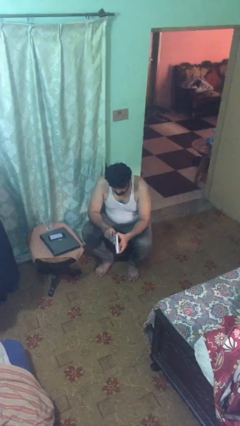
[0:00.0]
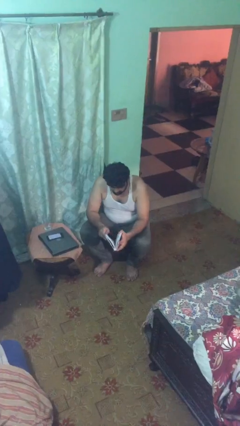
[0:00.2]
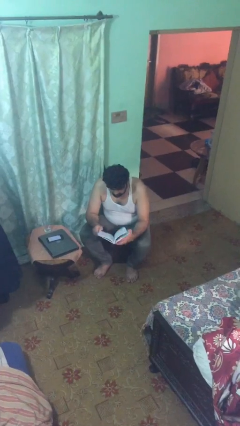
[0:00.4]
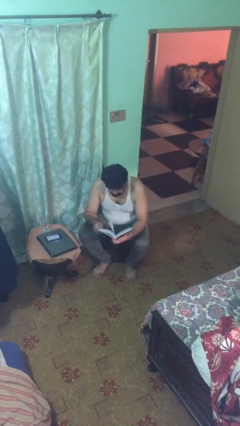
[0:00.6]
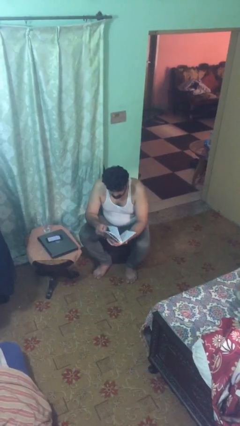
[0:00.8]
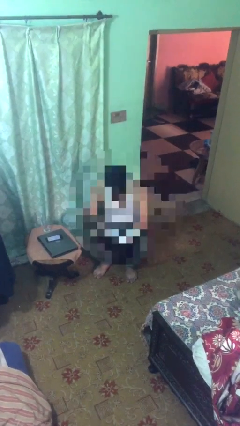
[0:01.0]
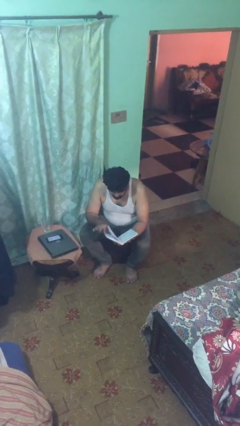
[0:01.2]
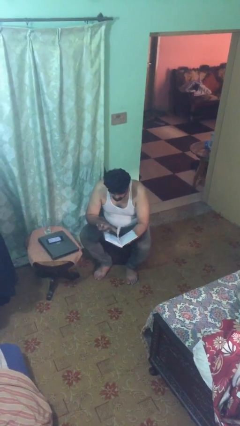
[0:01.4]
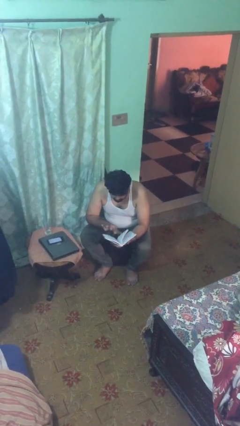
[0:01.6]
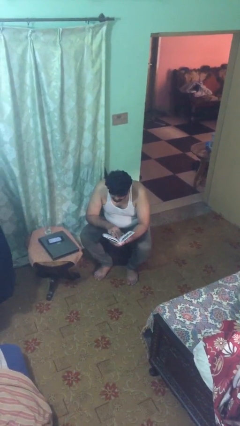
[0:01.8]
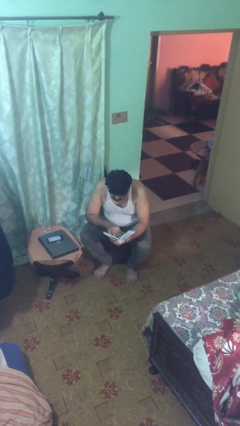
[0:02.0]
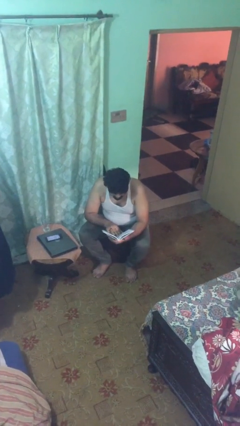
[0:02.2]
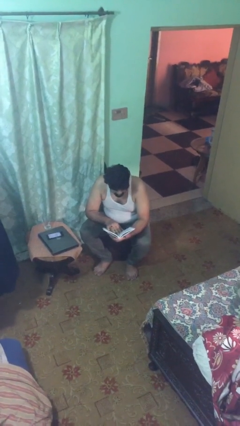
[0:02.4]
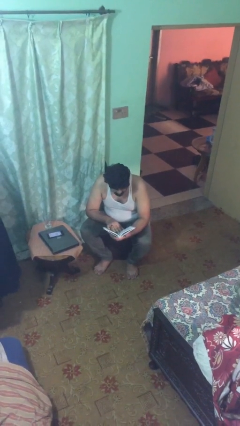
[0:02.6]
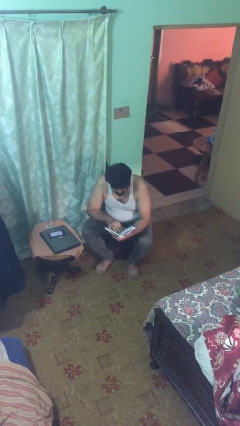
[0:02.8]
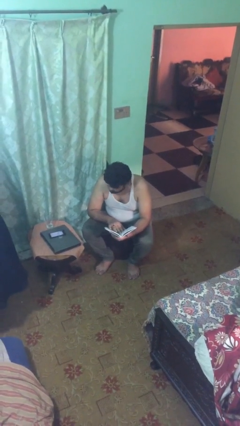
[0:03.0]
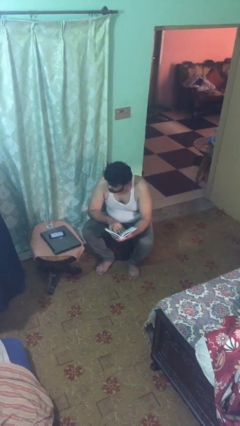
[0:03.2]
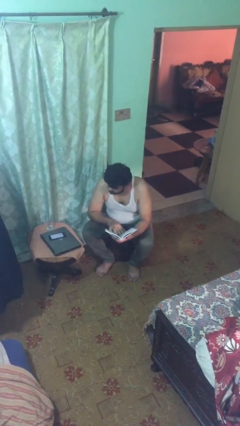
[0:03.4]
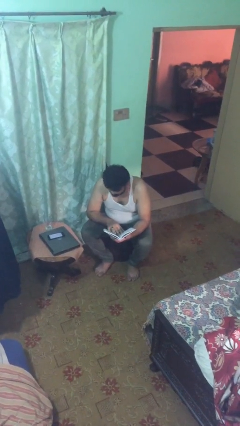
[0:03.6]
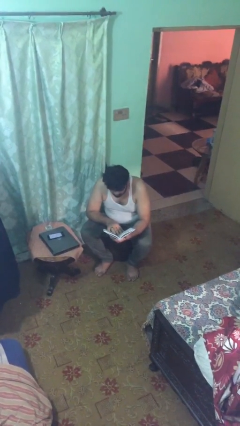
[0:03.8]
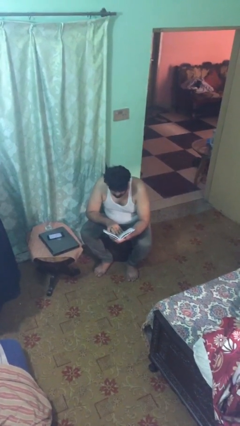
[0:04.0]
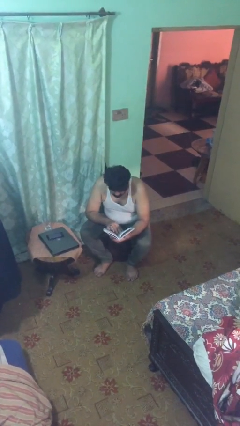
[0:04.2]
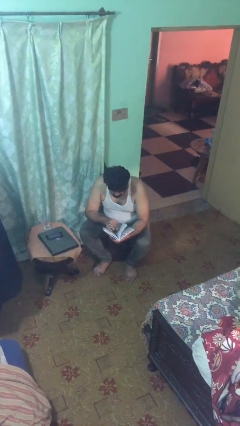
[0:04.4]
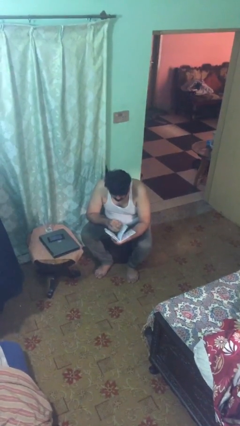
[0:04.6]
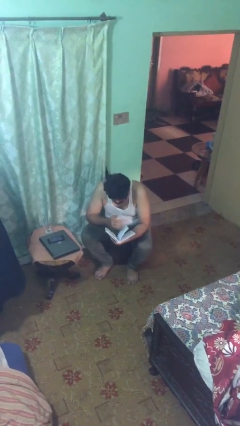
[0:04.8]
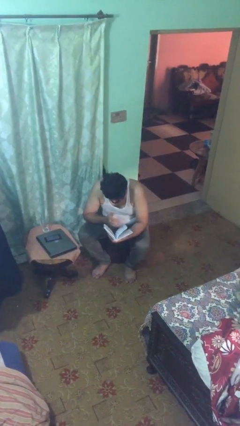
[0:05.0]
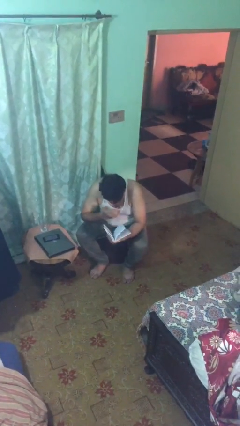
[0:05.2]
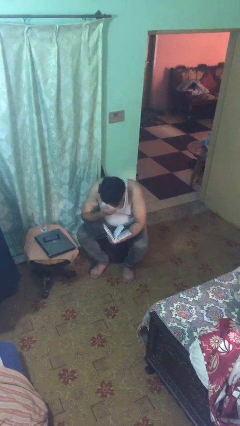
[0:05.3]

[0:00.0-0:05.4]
person reads document

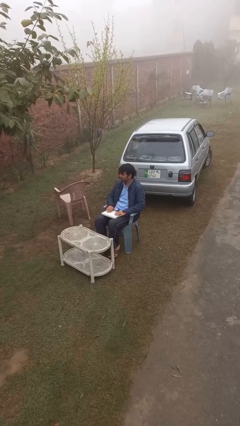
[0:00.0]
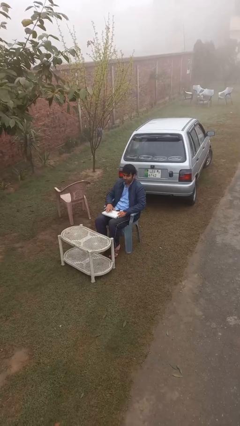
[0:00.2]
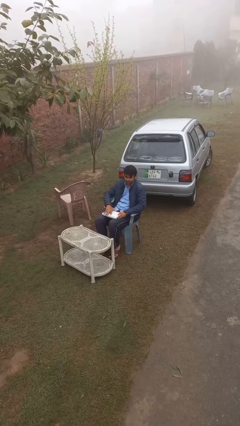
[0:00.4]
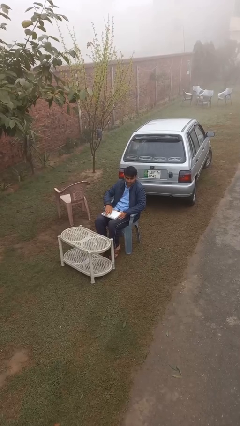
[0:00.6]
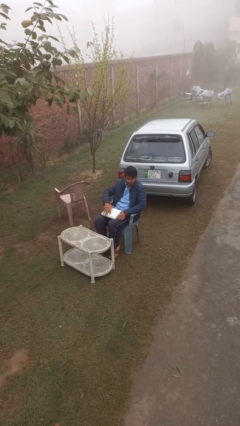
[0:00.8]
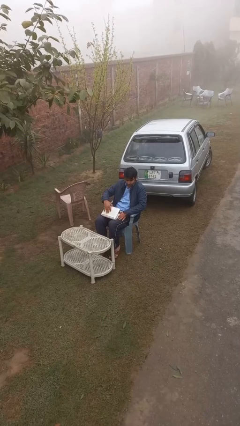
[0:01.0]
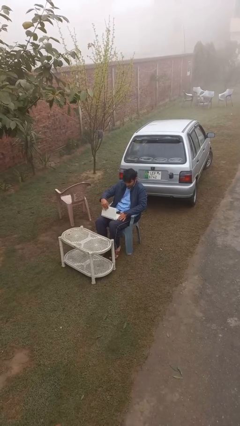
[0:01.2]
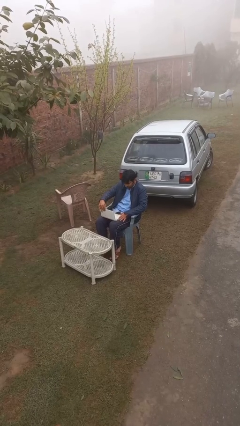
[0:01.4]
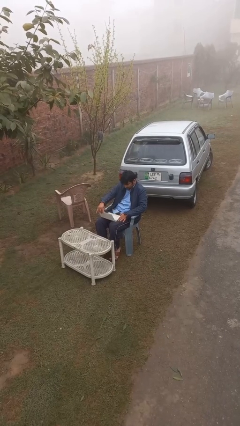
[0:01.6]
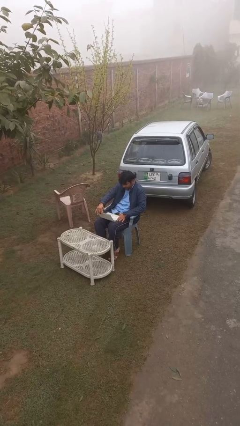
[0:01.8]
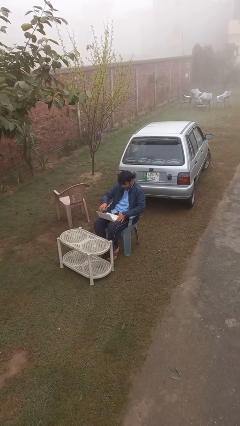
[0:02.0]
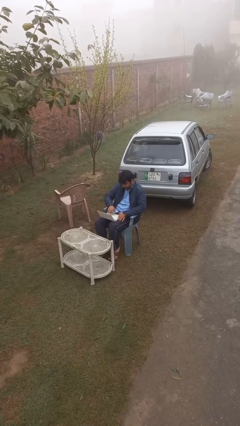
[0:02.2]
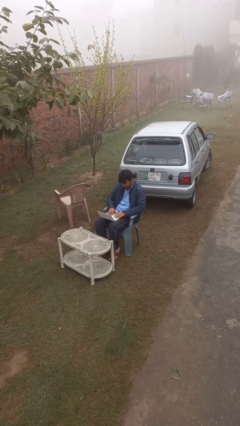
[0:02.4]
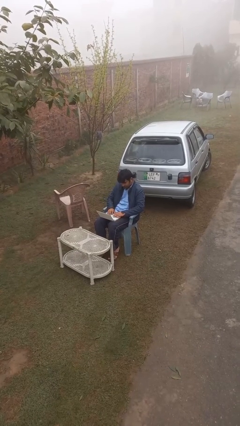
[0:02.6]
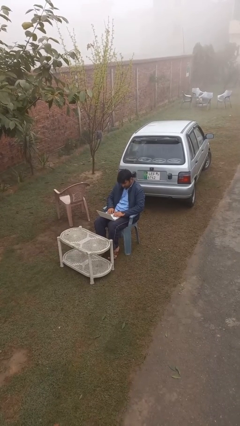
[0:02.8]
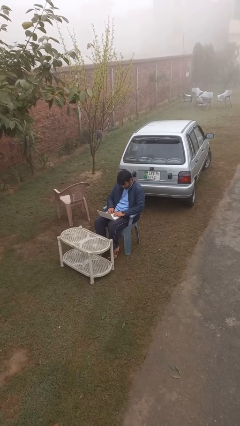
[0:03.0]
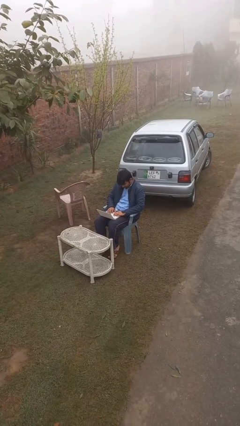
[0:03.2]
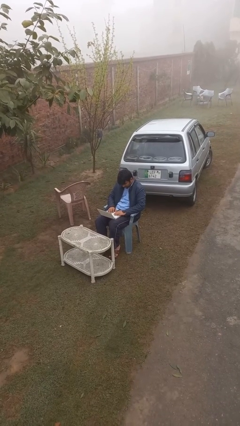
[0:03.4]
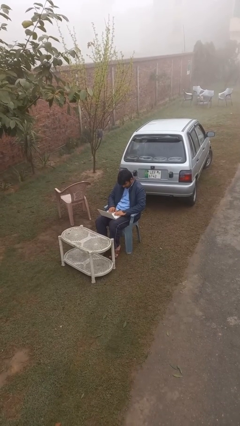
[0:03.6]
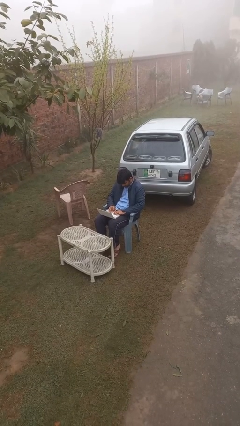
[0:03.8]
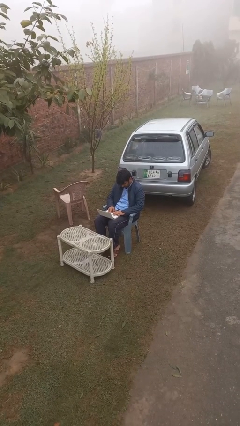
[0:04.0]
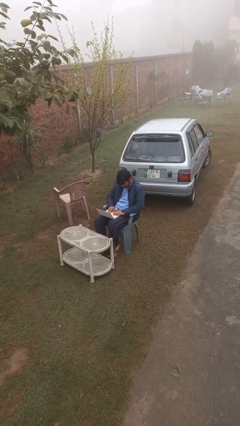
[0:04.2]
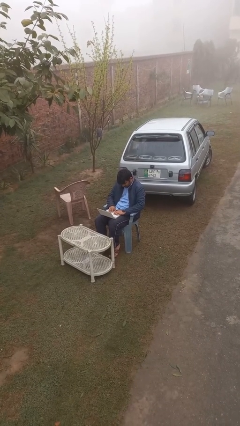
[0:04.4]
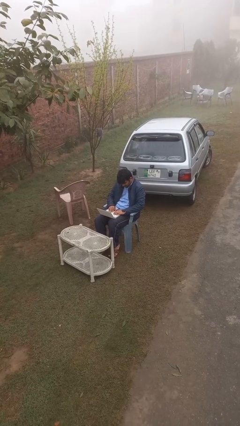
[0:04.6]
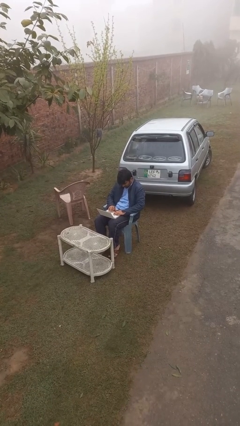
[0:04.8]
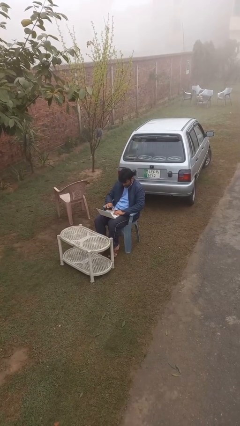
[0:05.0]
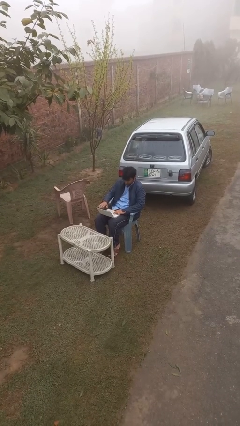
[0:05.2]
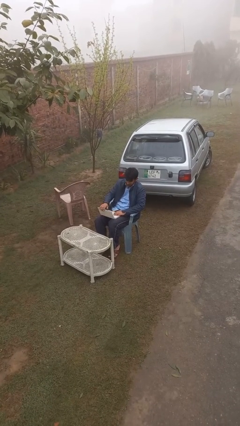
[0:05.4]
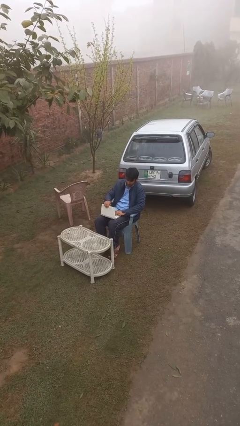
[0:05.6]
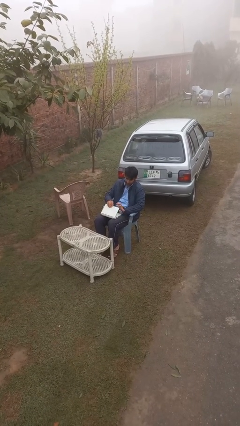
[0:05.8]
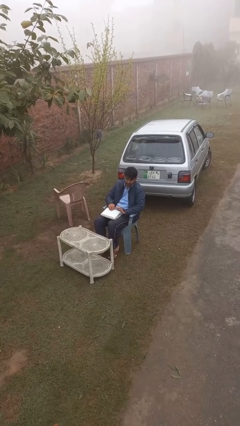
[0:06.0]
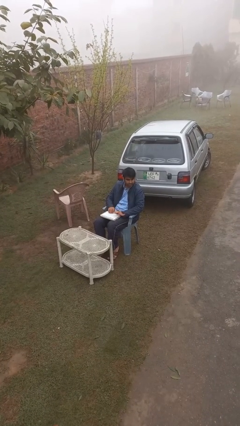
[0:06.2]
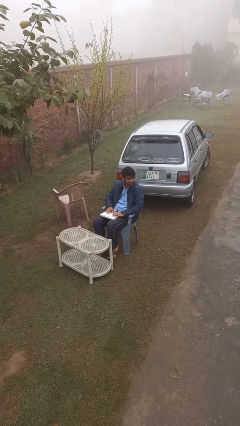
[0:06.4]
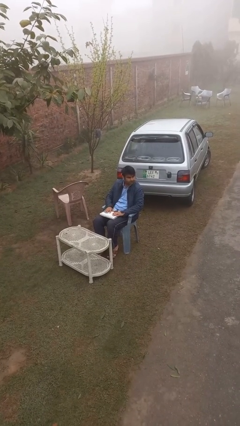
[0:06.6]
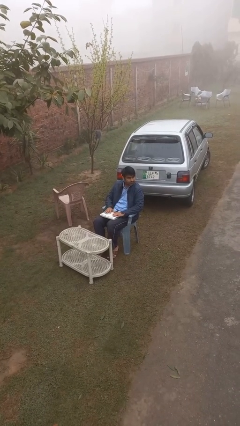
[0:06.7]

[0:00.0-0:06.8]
person interacts with laptop

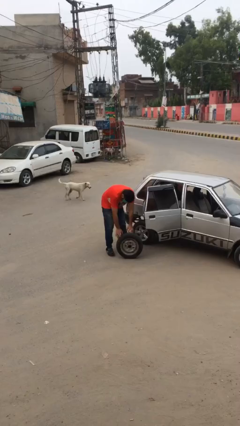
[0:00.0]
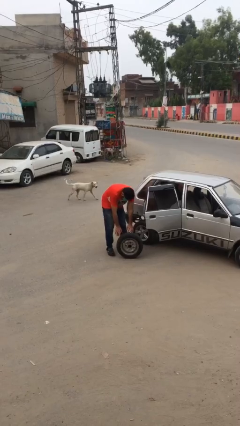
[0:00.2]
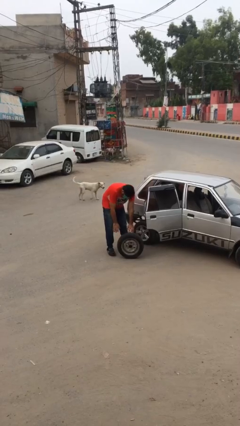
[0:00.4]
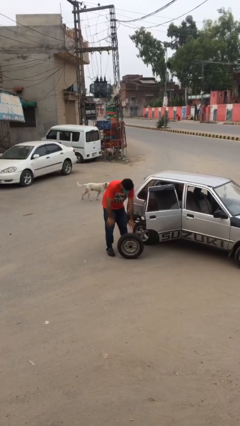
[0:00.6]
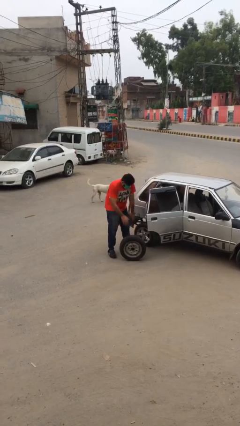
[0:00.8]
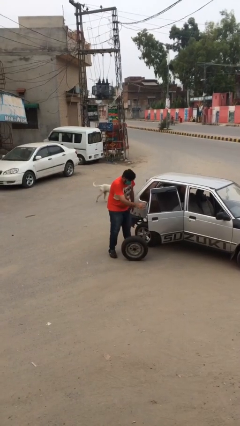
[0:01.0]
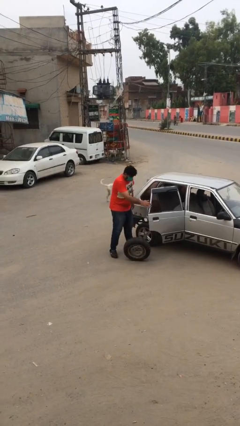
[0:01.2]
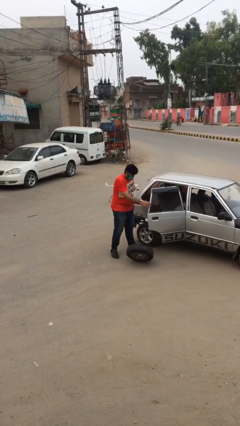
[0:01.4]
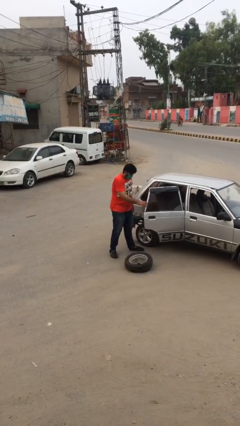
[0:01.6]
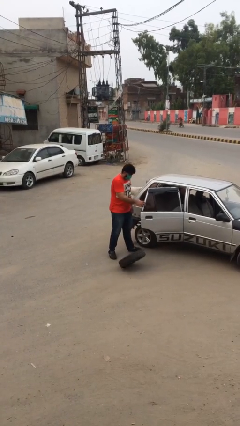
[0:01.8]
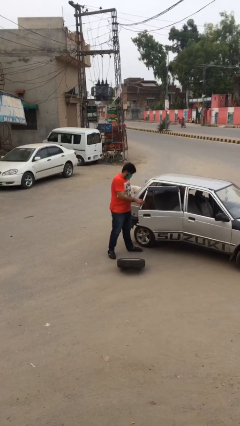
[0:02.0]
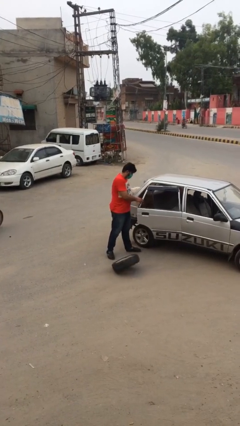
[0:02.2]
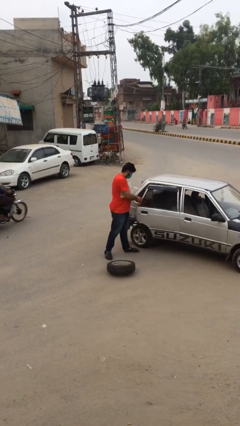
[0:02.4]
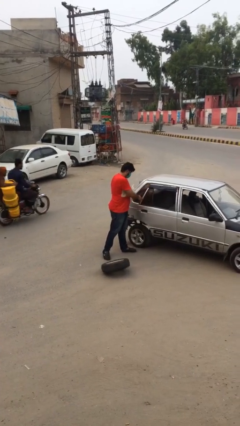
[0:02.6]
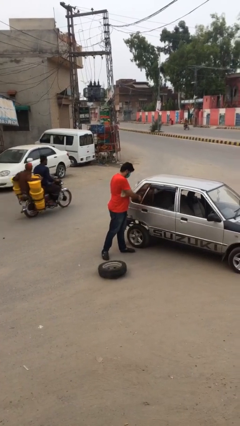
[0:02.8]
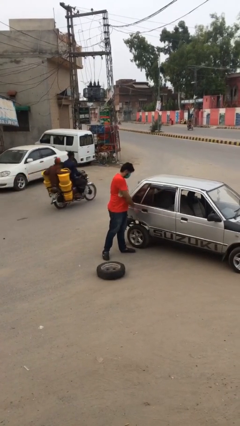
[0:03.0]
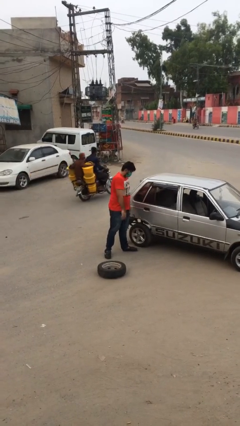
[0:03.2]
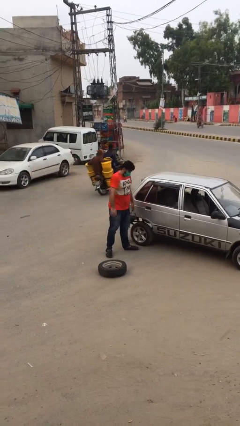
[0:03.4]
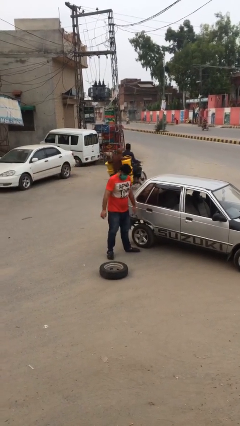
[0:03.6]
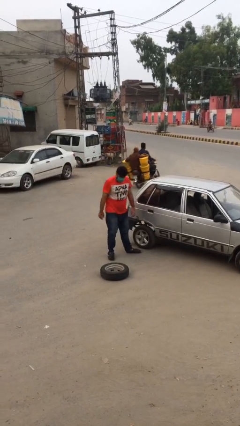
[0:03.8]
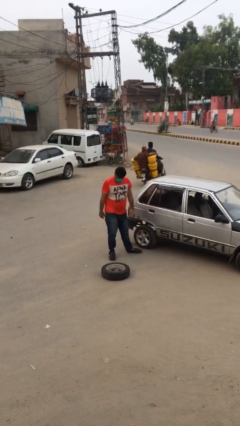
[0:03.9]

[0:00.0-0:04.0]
person closes car door

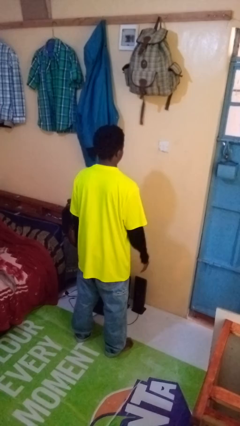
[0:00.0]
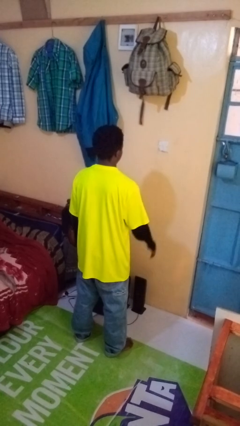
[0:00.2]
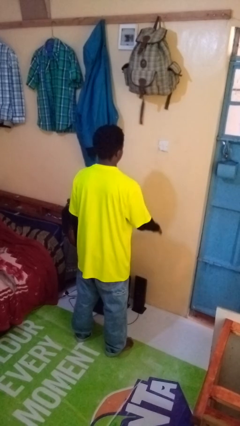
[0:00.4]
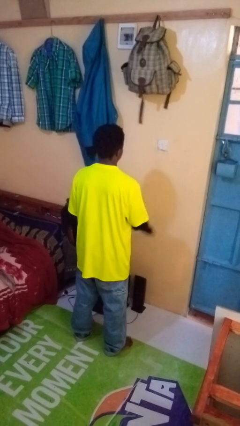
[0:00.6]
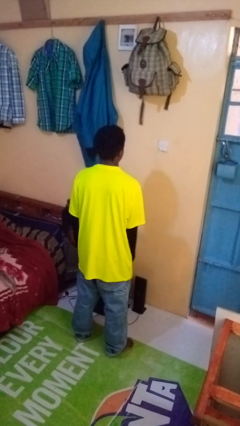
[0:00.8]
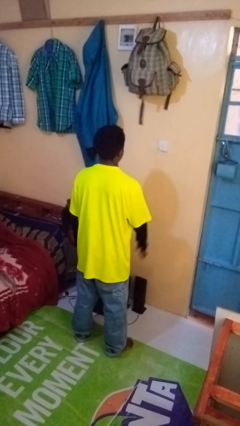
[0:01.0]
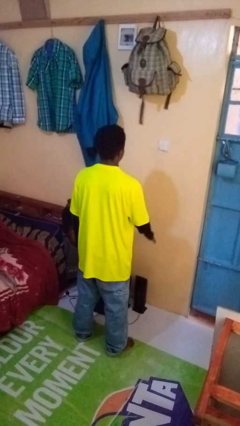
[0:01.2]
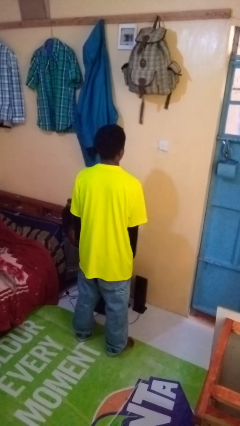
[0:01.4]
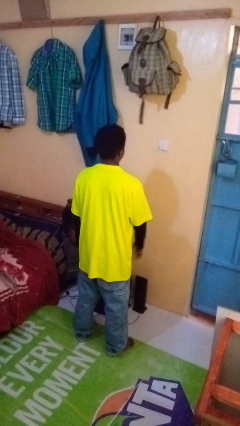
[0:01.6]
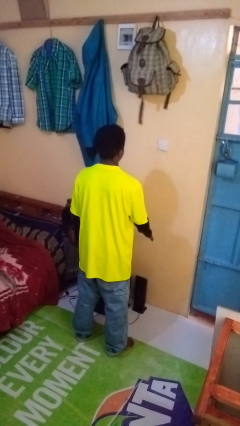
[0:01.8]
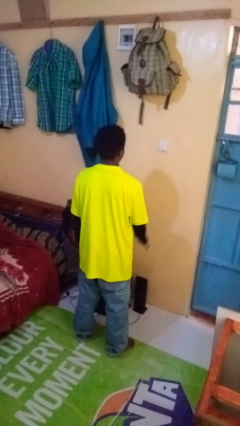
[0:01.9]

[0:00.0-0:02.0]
person slaps hands on thighs
